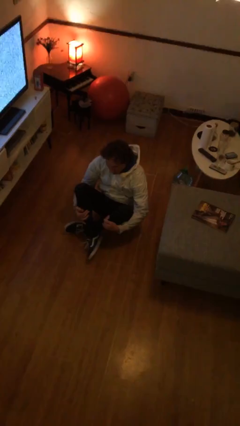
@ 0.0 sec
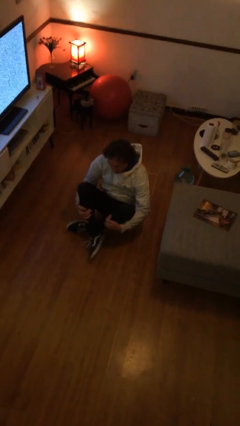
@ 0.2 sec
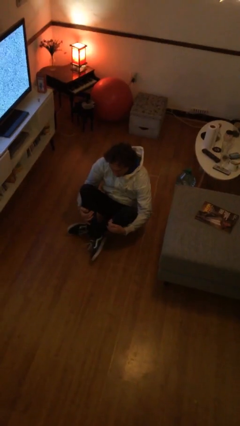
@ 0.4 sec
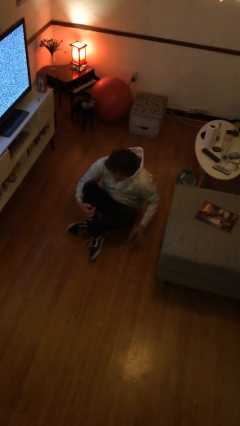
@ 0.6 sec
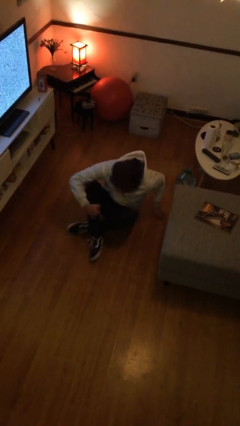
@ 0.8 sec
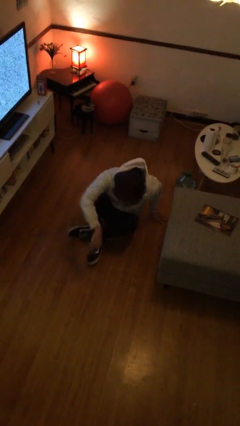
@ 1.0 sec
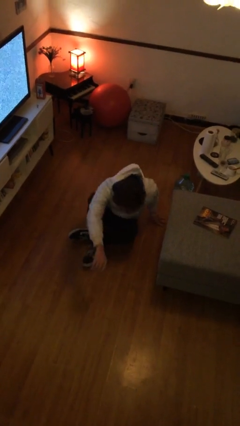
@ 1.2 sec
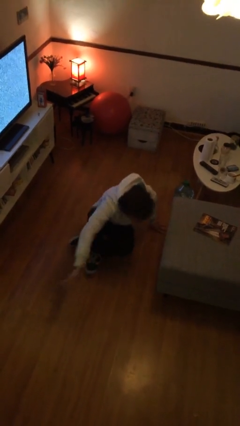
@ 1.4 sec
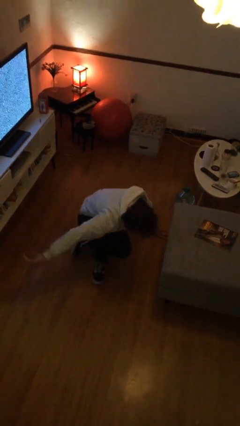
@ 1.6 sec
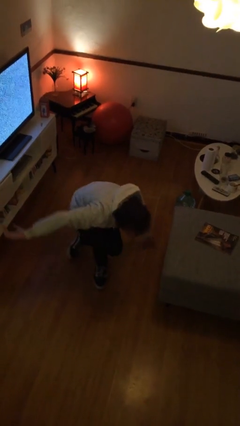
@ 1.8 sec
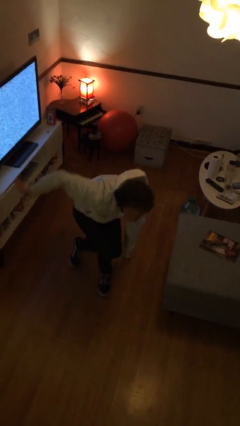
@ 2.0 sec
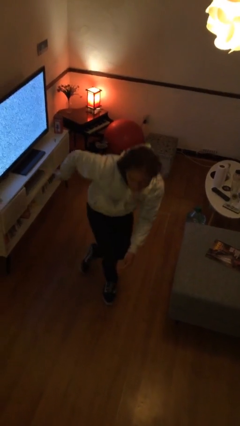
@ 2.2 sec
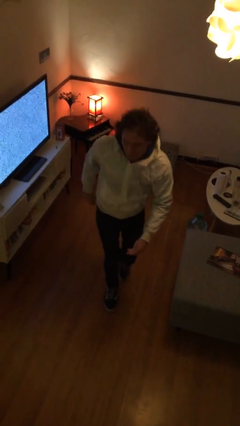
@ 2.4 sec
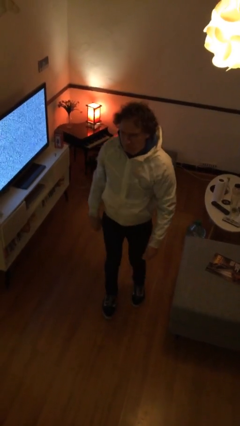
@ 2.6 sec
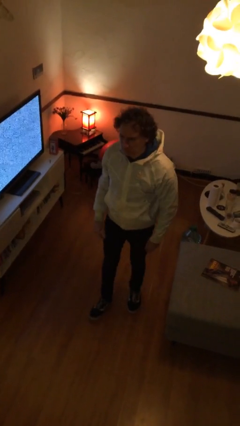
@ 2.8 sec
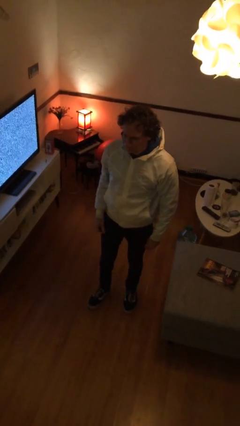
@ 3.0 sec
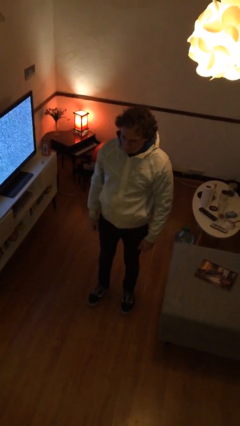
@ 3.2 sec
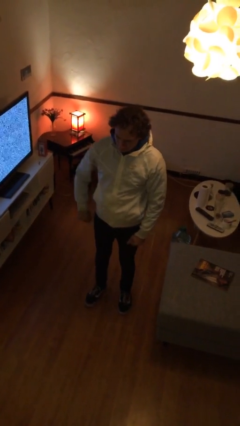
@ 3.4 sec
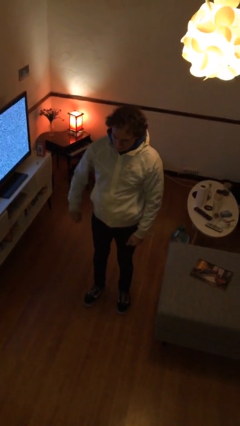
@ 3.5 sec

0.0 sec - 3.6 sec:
person stands up from floor

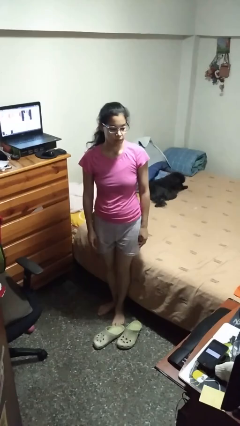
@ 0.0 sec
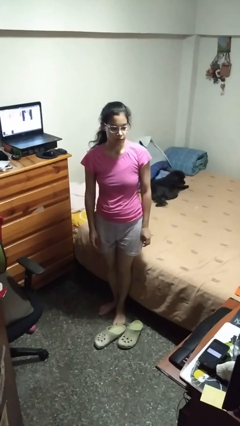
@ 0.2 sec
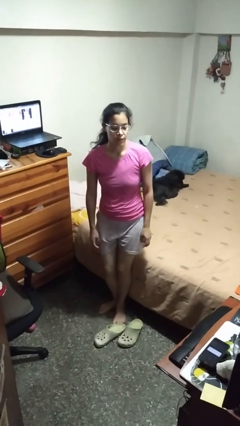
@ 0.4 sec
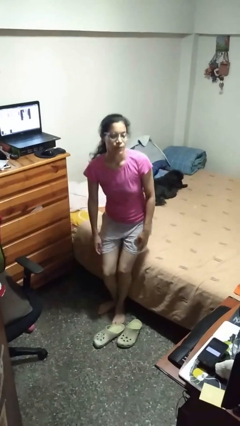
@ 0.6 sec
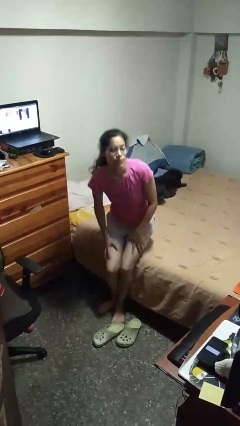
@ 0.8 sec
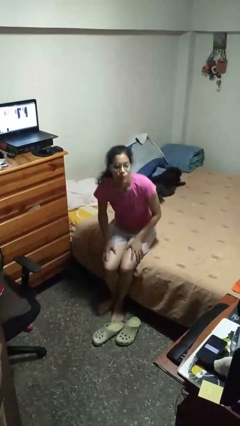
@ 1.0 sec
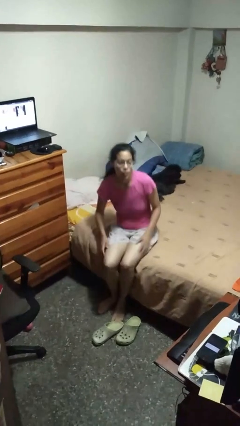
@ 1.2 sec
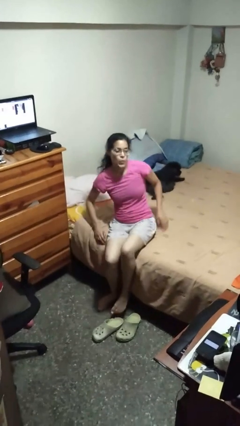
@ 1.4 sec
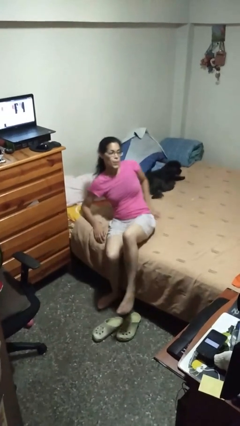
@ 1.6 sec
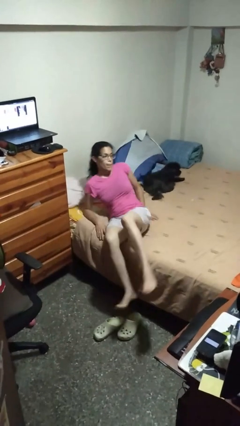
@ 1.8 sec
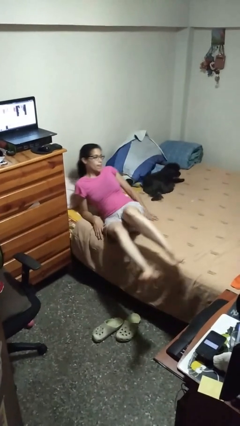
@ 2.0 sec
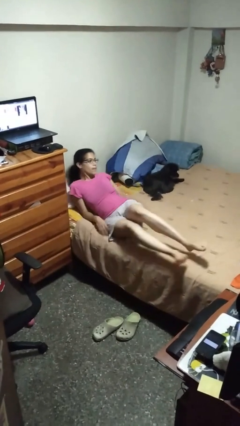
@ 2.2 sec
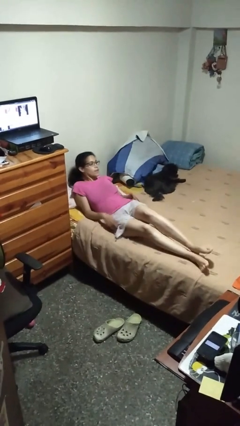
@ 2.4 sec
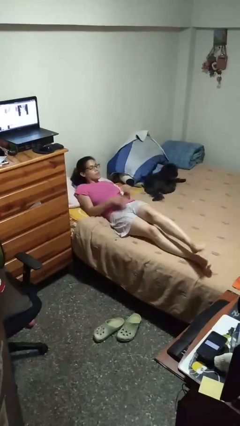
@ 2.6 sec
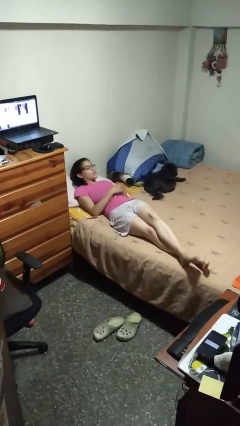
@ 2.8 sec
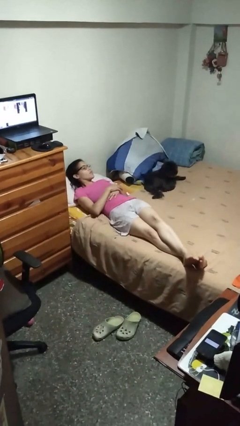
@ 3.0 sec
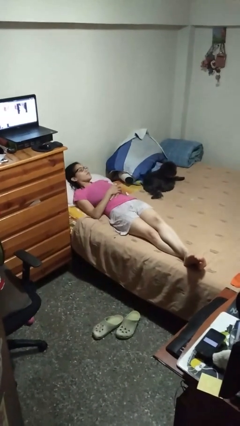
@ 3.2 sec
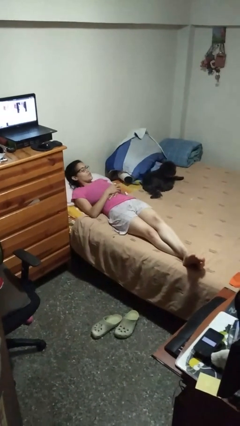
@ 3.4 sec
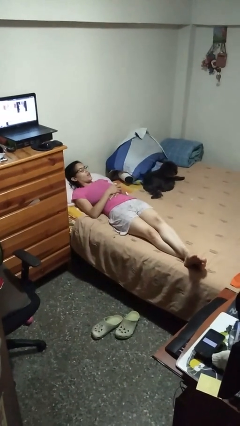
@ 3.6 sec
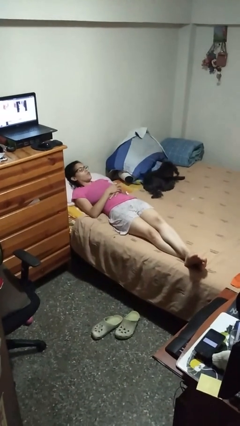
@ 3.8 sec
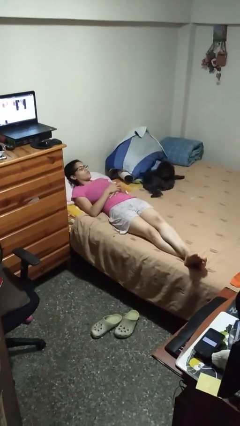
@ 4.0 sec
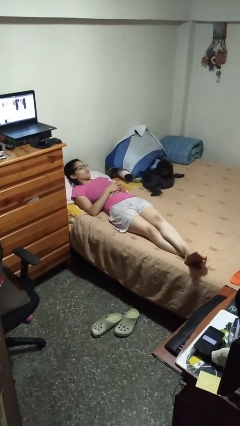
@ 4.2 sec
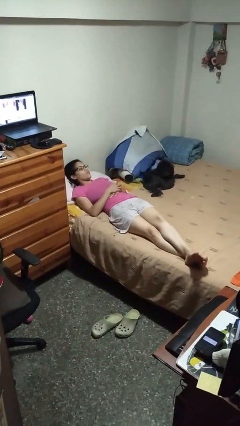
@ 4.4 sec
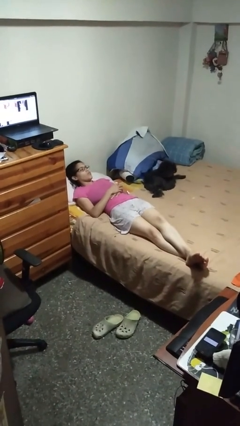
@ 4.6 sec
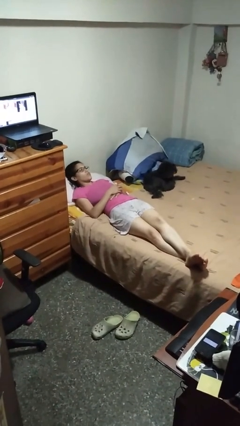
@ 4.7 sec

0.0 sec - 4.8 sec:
person lies down on bed

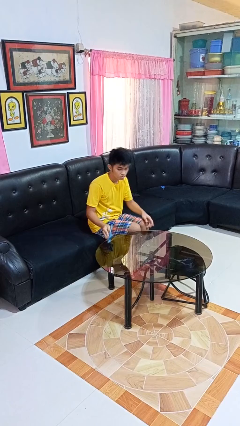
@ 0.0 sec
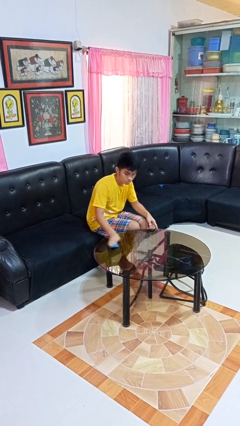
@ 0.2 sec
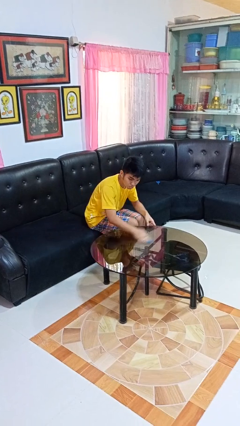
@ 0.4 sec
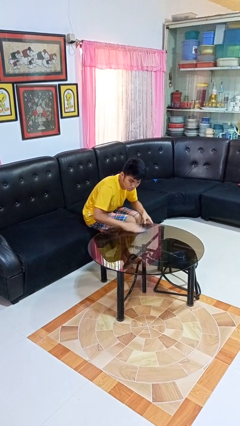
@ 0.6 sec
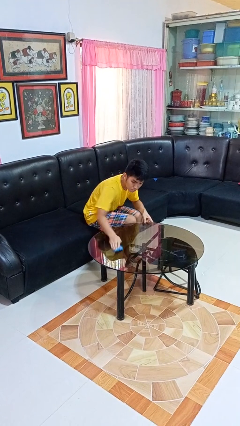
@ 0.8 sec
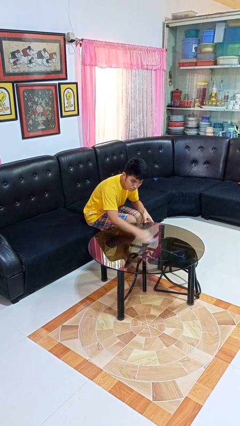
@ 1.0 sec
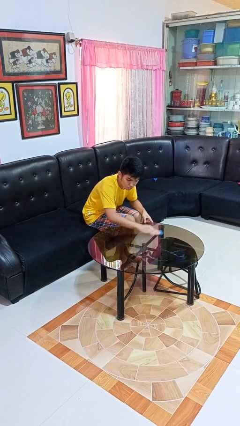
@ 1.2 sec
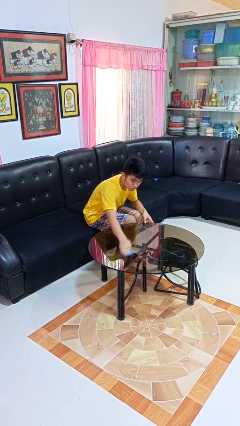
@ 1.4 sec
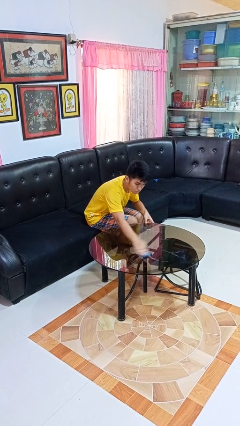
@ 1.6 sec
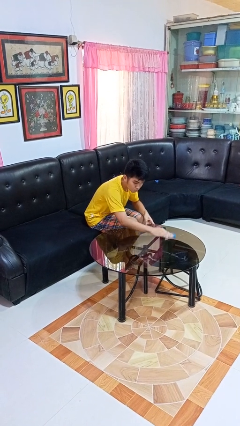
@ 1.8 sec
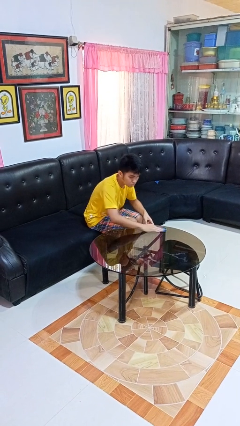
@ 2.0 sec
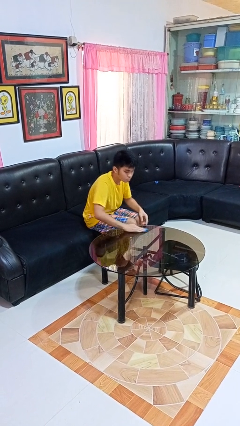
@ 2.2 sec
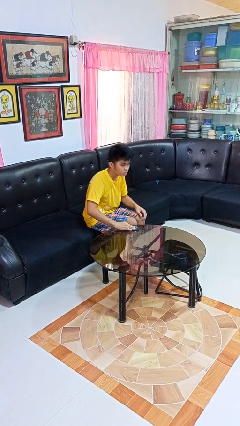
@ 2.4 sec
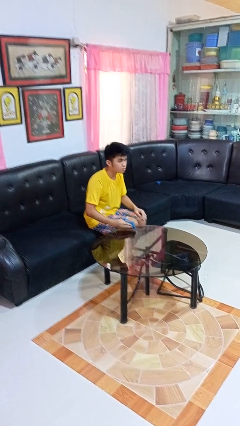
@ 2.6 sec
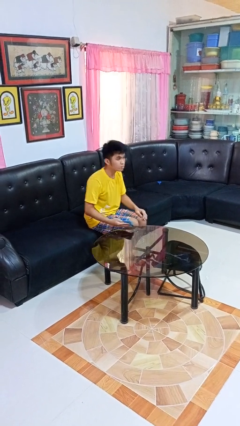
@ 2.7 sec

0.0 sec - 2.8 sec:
person cleans table with rag

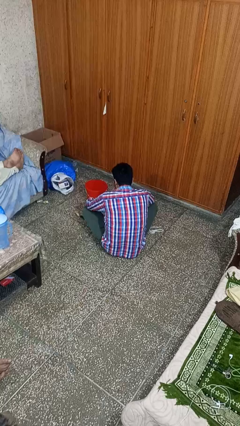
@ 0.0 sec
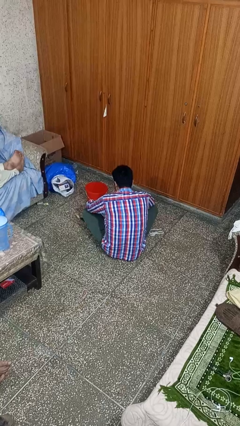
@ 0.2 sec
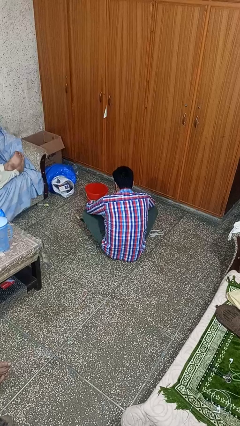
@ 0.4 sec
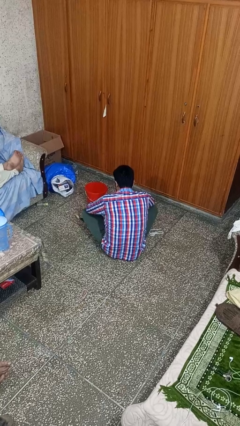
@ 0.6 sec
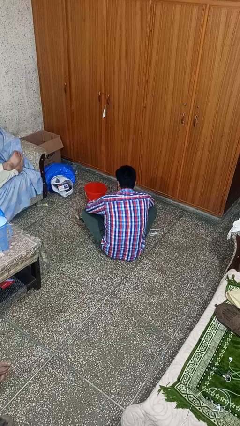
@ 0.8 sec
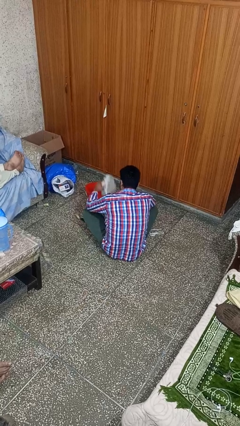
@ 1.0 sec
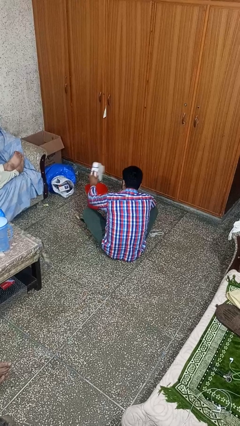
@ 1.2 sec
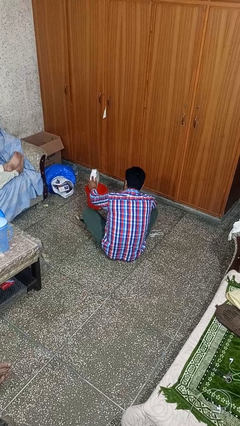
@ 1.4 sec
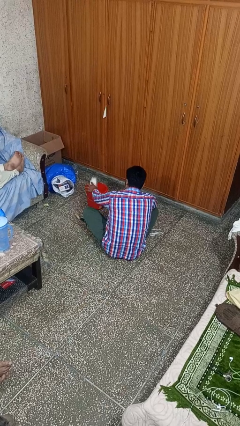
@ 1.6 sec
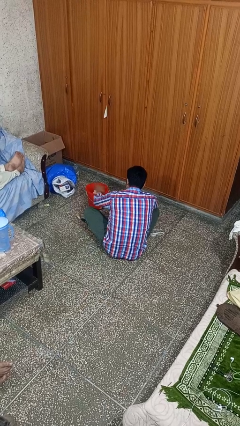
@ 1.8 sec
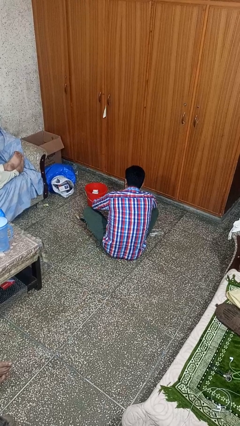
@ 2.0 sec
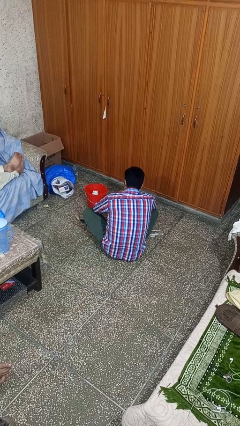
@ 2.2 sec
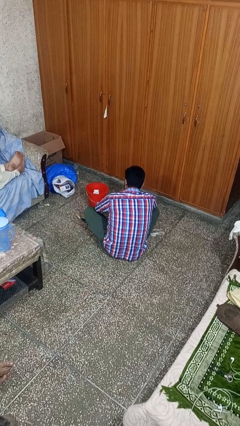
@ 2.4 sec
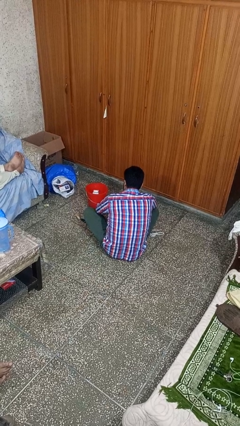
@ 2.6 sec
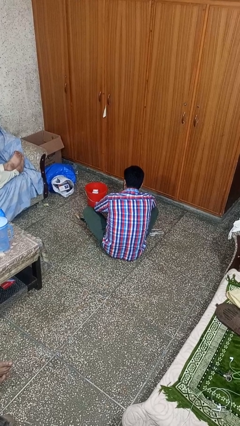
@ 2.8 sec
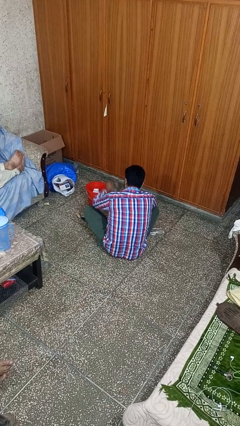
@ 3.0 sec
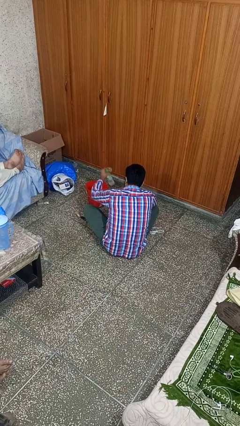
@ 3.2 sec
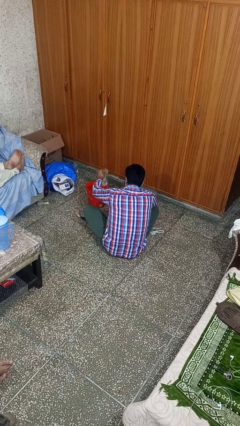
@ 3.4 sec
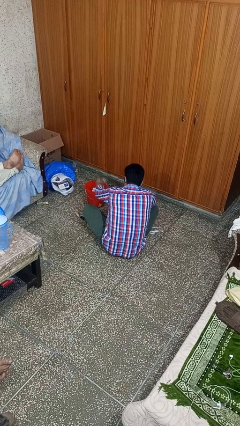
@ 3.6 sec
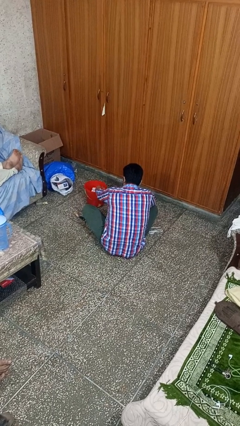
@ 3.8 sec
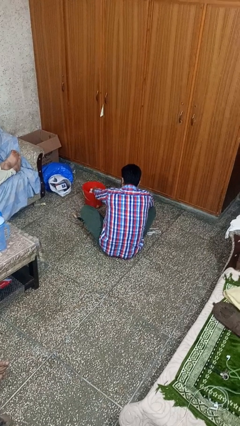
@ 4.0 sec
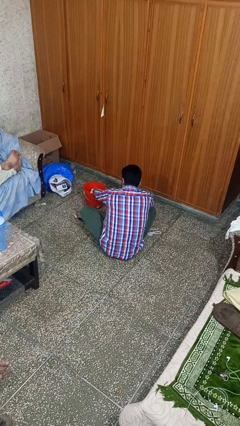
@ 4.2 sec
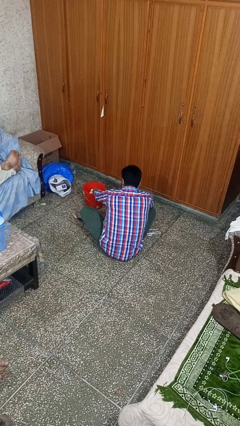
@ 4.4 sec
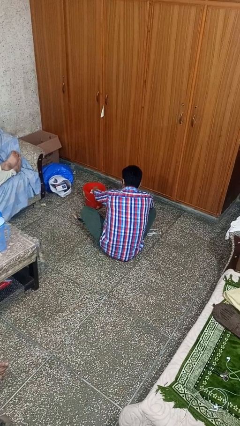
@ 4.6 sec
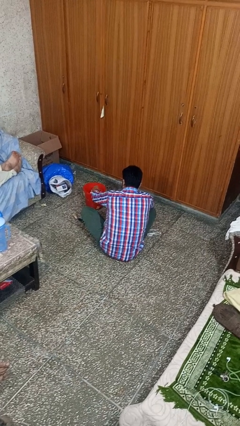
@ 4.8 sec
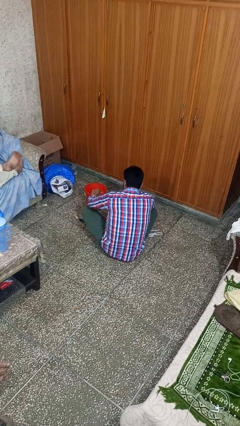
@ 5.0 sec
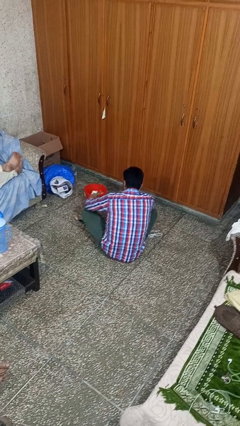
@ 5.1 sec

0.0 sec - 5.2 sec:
person puts object into basket

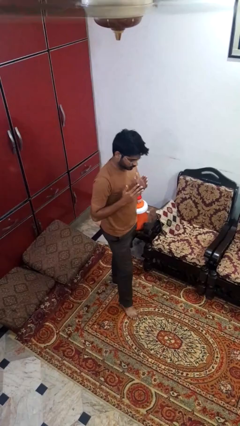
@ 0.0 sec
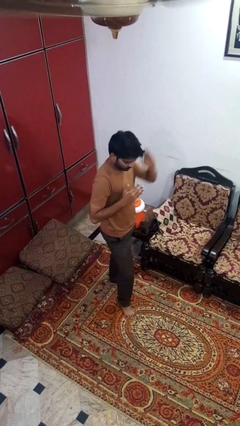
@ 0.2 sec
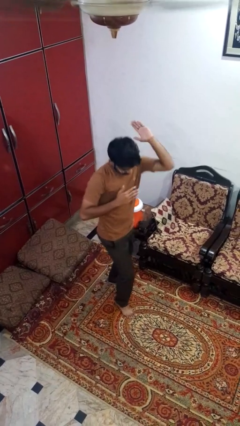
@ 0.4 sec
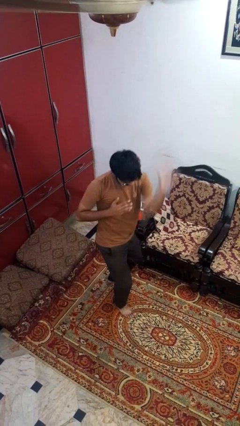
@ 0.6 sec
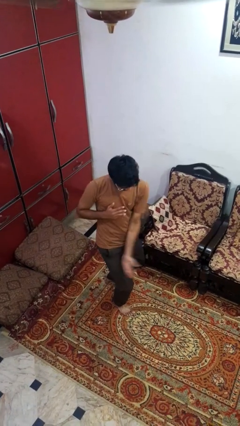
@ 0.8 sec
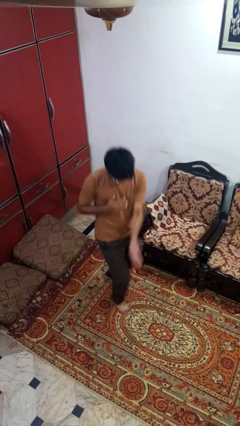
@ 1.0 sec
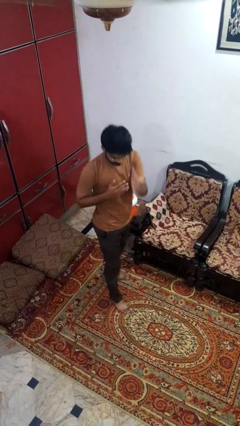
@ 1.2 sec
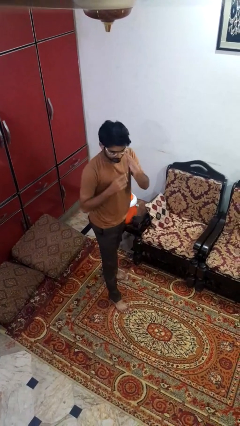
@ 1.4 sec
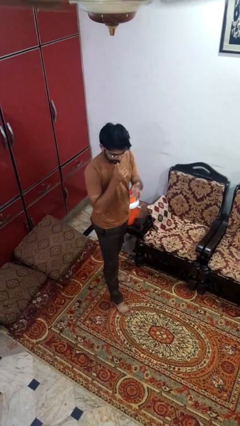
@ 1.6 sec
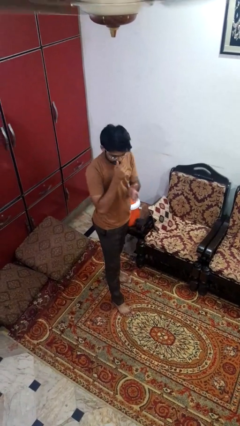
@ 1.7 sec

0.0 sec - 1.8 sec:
person karate chop
